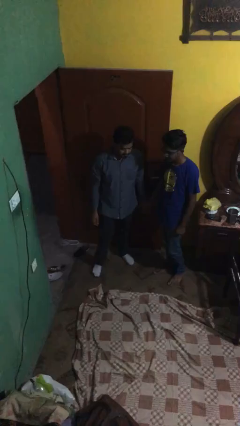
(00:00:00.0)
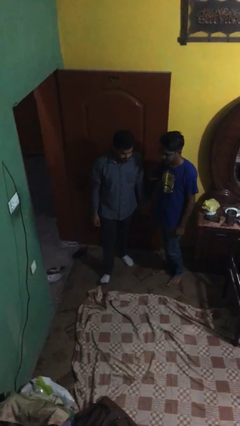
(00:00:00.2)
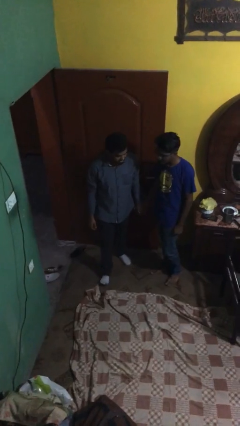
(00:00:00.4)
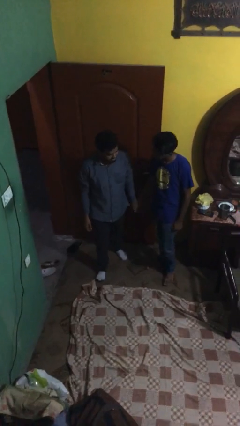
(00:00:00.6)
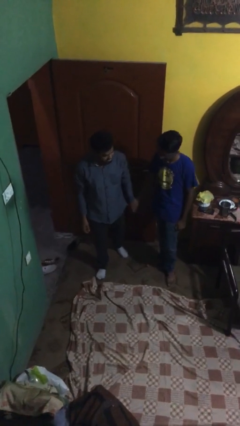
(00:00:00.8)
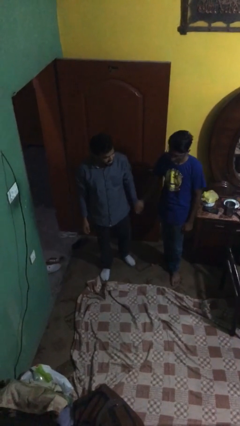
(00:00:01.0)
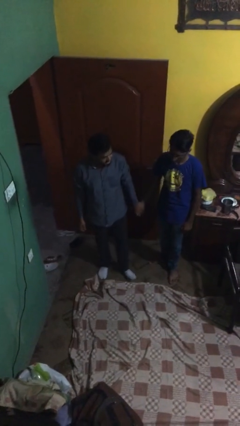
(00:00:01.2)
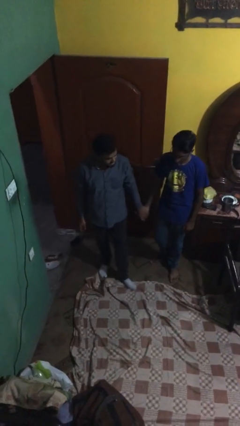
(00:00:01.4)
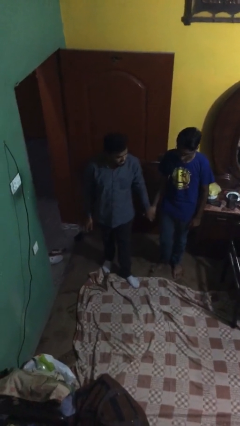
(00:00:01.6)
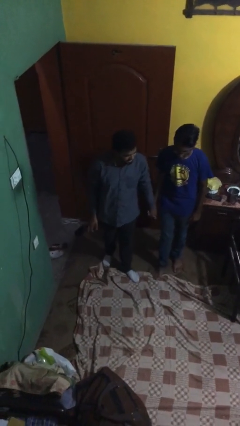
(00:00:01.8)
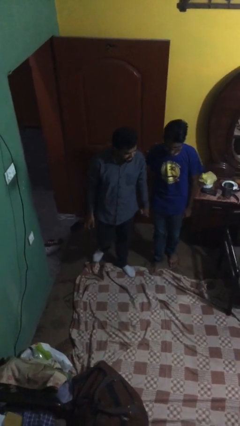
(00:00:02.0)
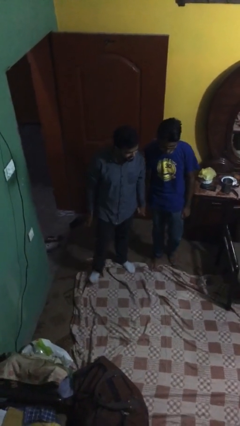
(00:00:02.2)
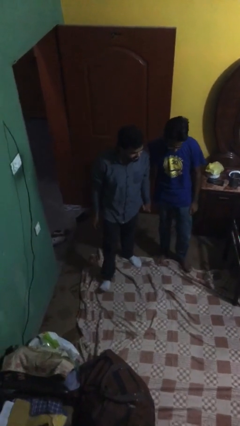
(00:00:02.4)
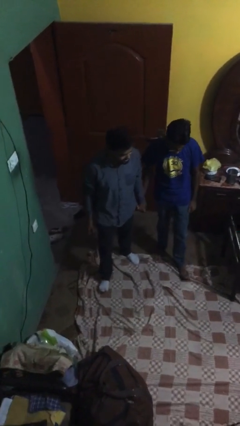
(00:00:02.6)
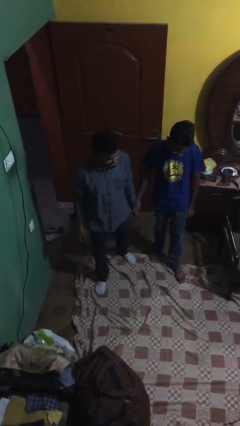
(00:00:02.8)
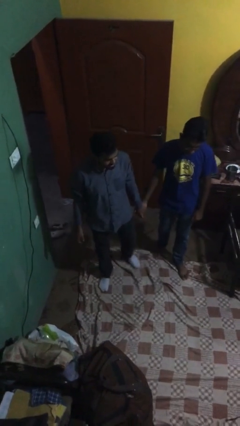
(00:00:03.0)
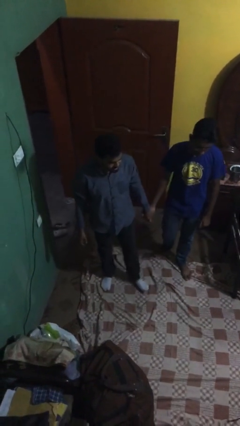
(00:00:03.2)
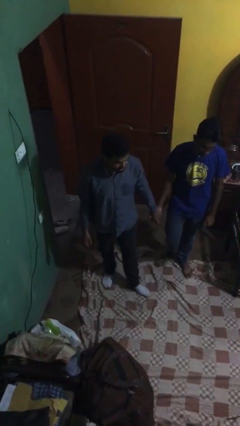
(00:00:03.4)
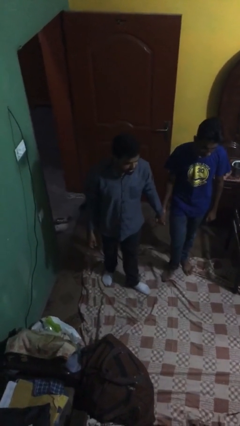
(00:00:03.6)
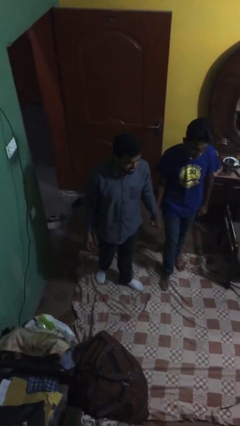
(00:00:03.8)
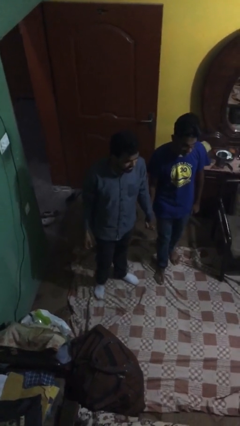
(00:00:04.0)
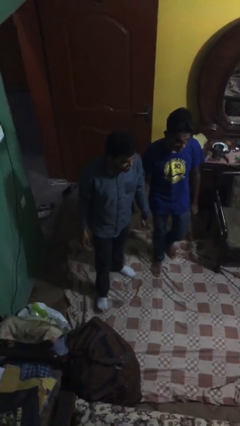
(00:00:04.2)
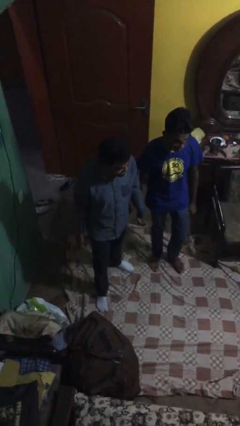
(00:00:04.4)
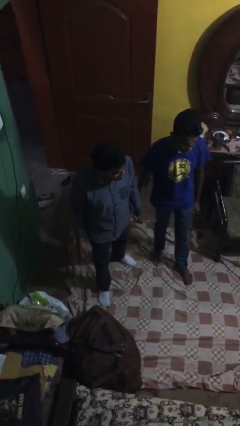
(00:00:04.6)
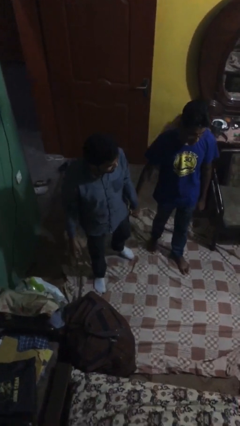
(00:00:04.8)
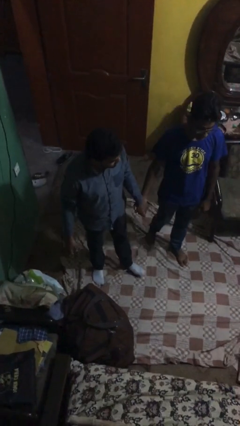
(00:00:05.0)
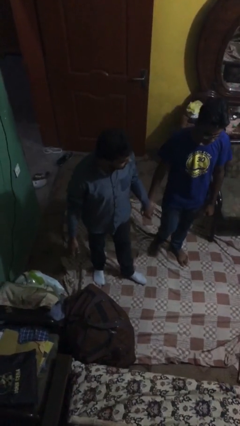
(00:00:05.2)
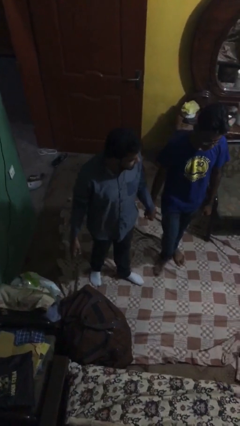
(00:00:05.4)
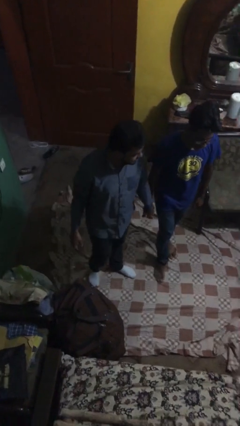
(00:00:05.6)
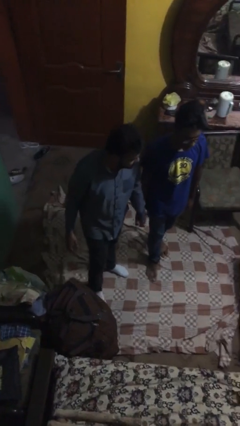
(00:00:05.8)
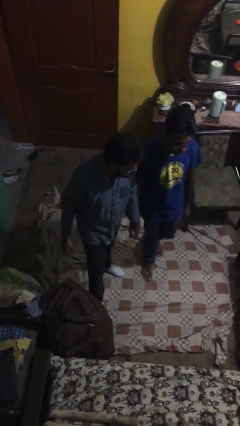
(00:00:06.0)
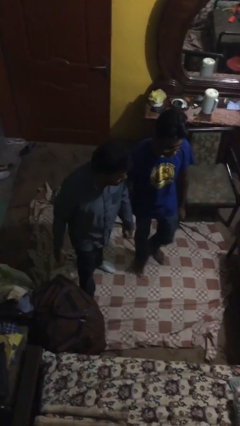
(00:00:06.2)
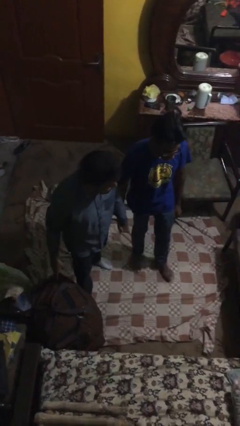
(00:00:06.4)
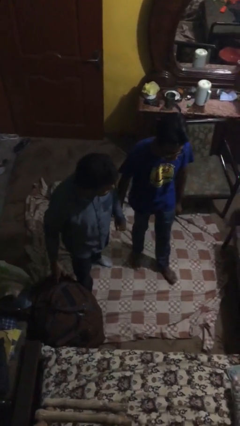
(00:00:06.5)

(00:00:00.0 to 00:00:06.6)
person holds hand

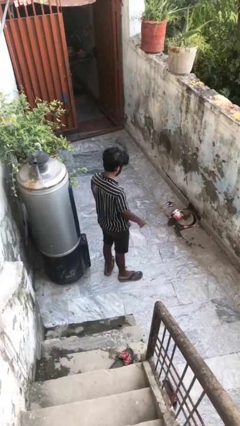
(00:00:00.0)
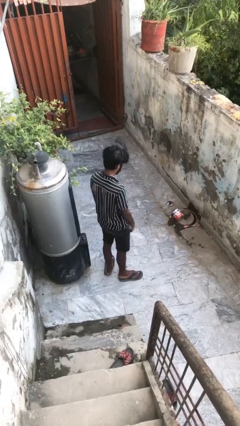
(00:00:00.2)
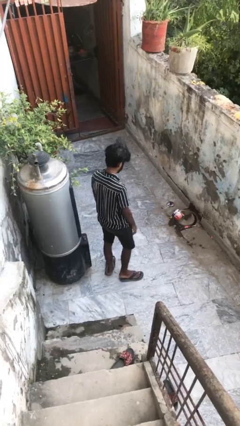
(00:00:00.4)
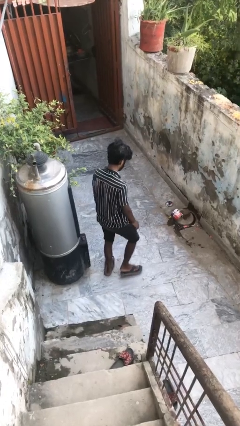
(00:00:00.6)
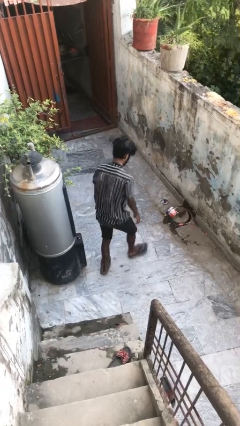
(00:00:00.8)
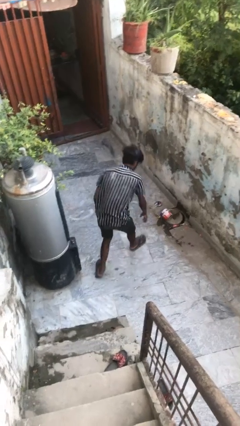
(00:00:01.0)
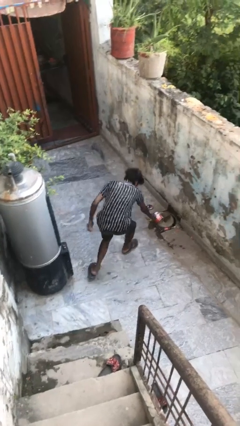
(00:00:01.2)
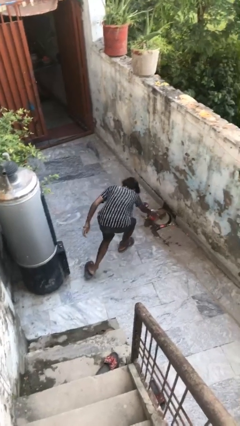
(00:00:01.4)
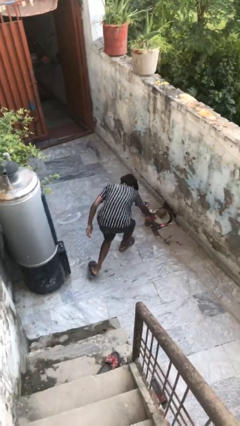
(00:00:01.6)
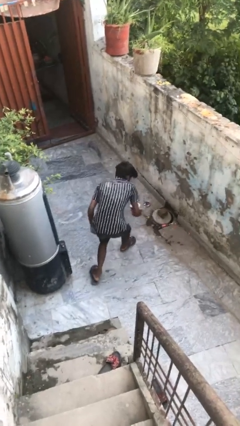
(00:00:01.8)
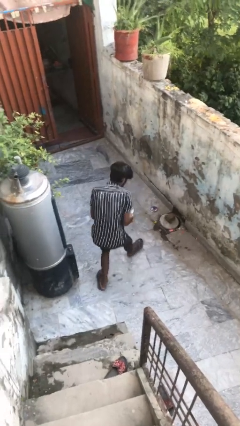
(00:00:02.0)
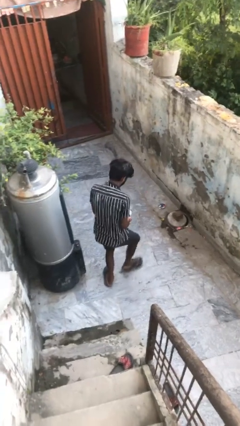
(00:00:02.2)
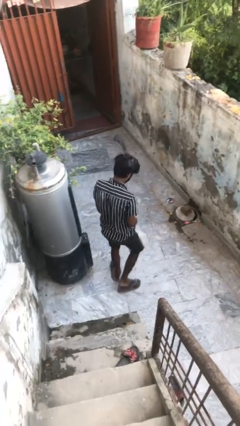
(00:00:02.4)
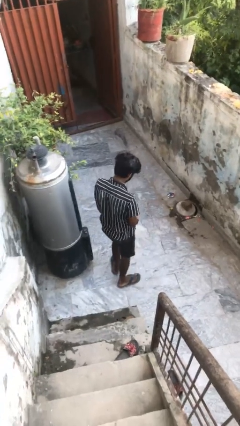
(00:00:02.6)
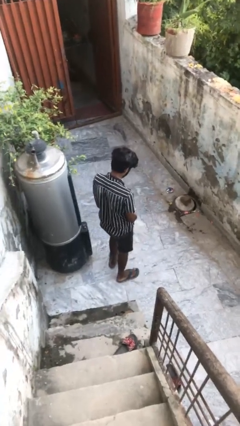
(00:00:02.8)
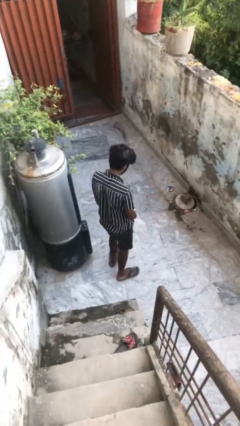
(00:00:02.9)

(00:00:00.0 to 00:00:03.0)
person picks up object from floor

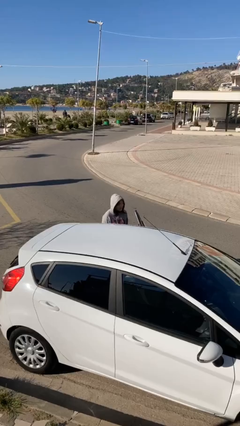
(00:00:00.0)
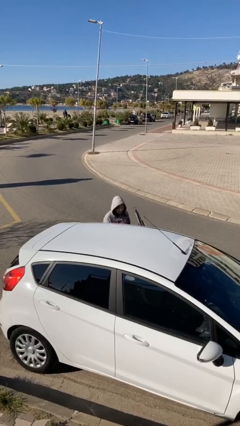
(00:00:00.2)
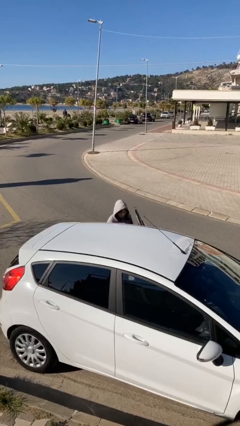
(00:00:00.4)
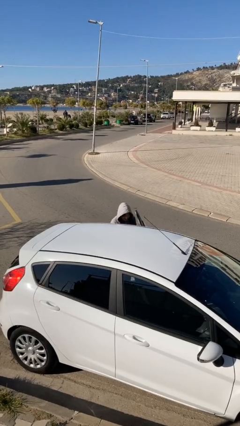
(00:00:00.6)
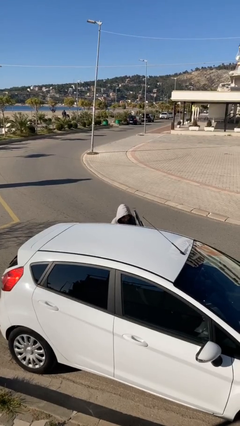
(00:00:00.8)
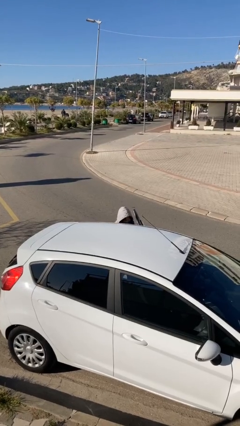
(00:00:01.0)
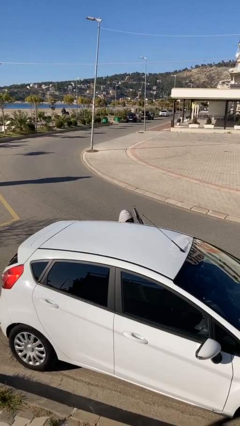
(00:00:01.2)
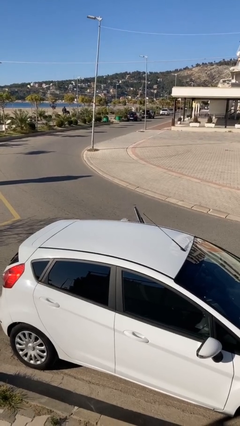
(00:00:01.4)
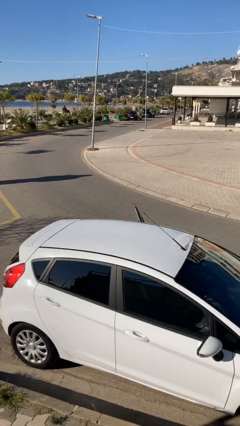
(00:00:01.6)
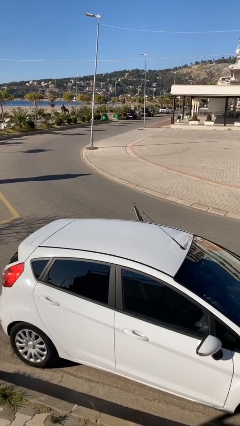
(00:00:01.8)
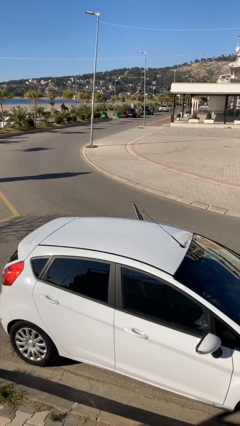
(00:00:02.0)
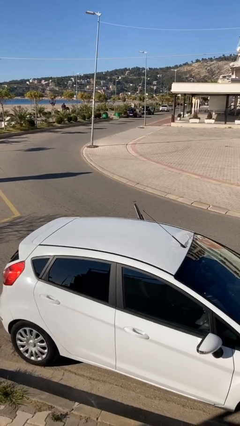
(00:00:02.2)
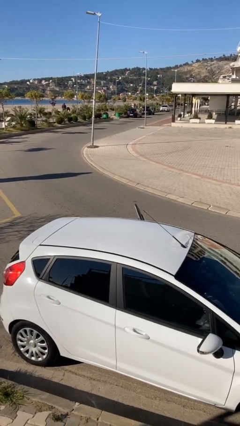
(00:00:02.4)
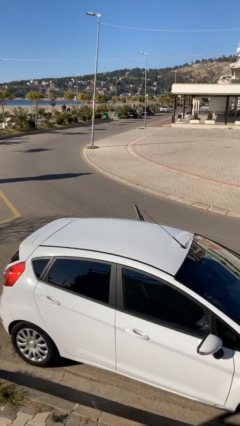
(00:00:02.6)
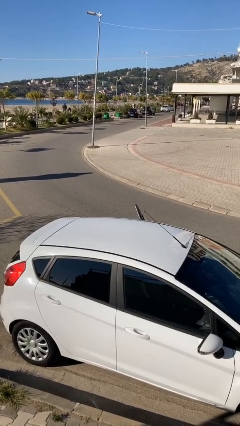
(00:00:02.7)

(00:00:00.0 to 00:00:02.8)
person enters car

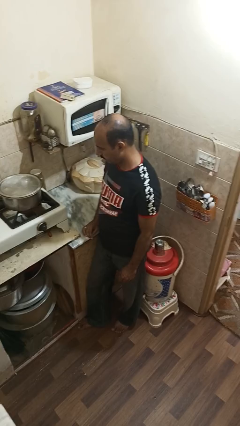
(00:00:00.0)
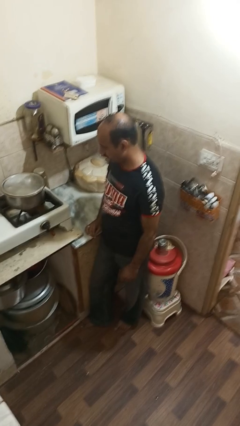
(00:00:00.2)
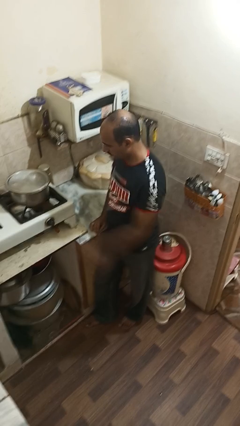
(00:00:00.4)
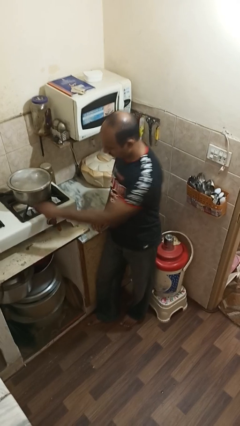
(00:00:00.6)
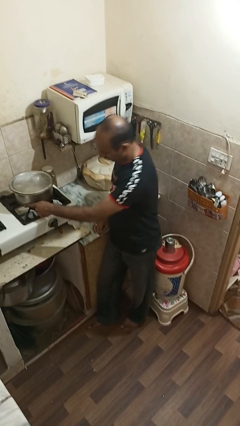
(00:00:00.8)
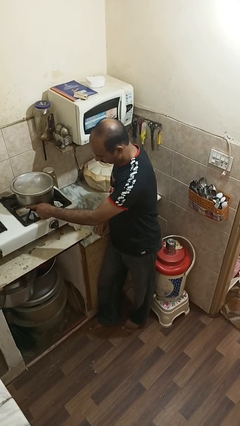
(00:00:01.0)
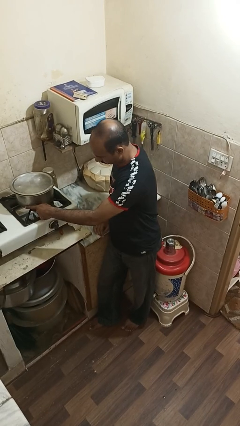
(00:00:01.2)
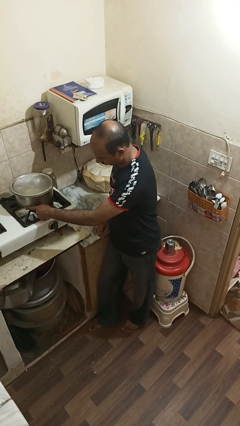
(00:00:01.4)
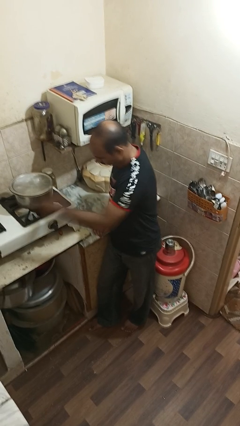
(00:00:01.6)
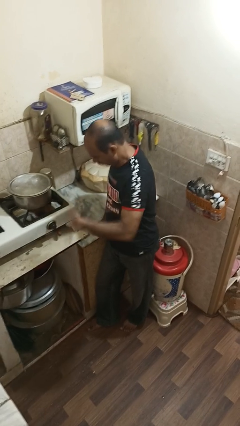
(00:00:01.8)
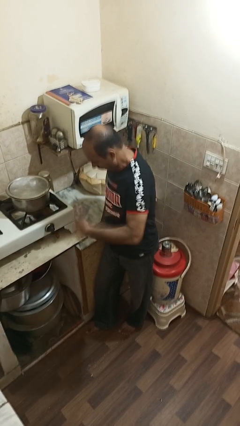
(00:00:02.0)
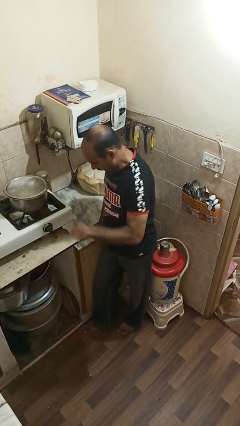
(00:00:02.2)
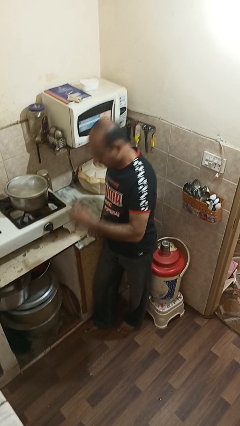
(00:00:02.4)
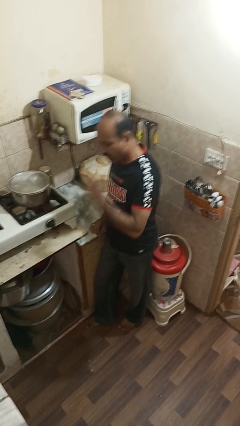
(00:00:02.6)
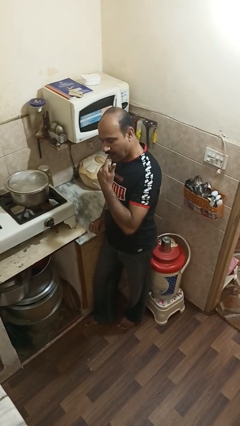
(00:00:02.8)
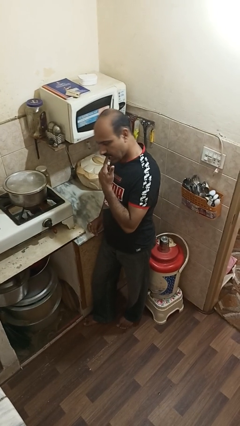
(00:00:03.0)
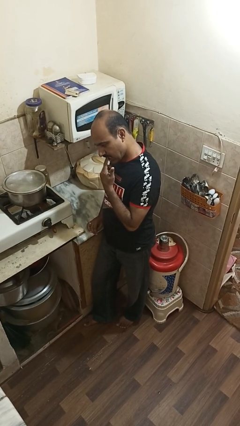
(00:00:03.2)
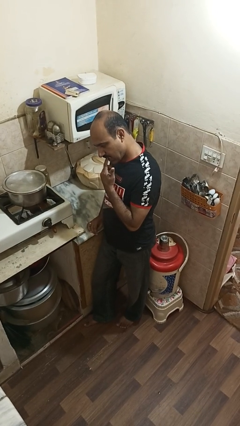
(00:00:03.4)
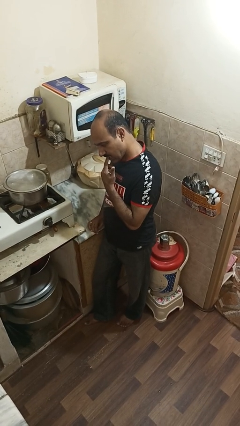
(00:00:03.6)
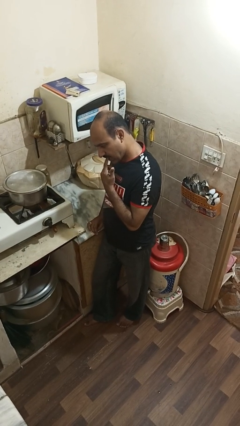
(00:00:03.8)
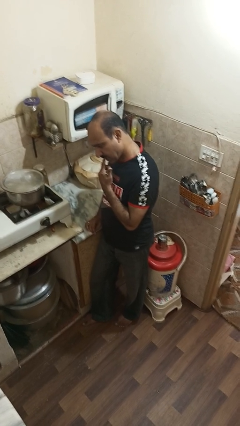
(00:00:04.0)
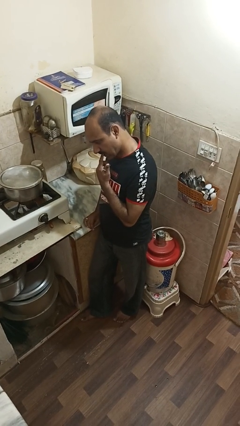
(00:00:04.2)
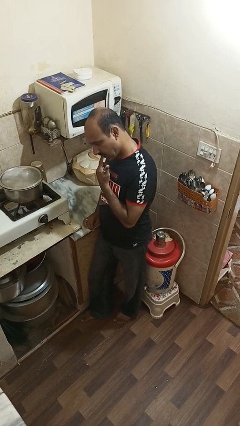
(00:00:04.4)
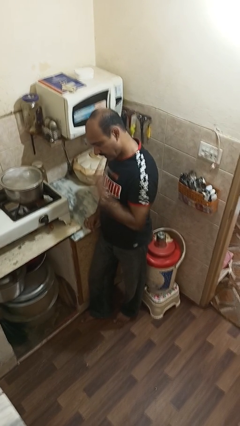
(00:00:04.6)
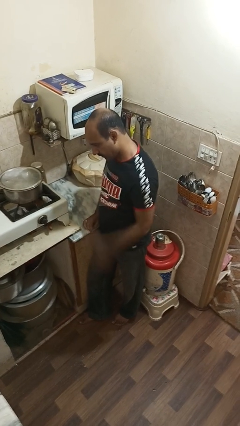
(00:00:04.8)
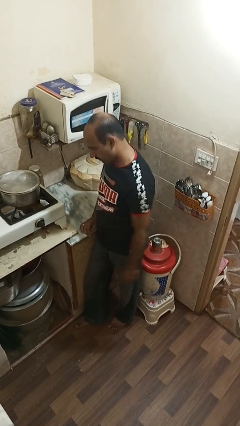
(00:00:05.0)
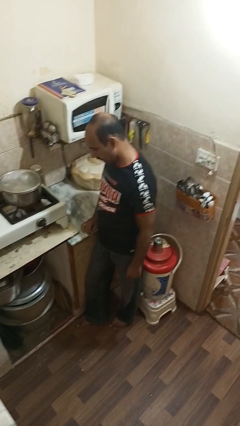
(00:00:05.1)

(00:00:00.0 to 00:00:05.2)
person burns hand
